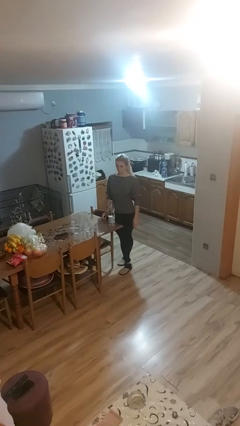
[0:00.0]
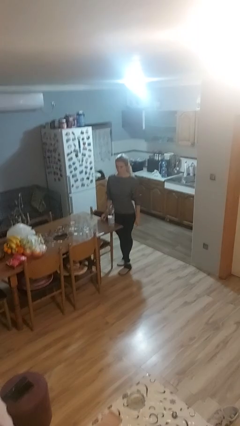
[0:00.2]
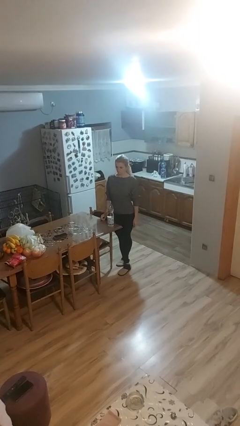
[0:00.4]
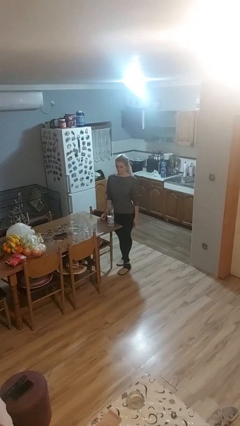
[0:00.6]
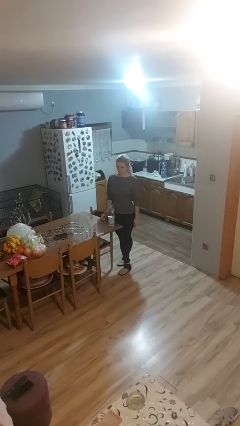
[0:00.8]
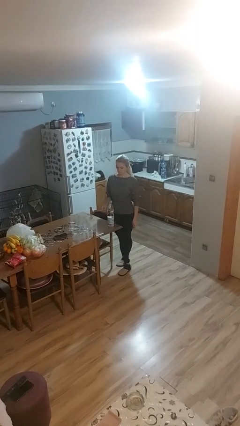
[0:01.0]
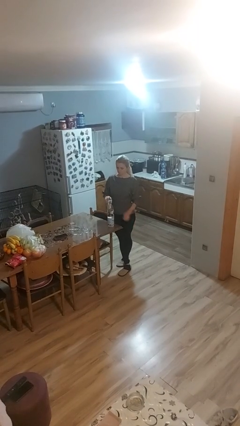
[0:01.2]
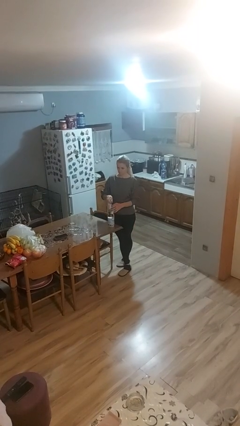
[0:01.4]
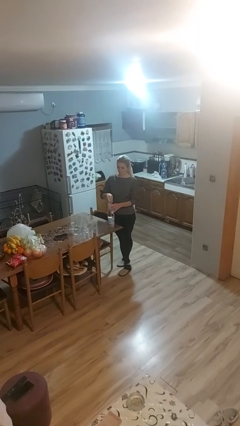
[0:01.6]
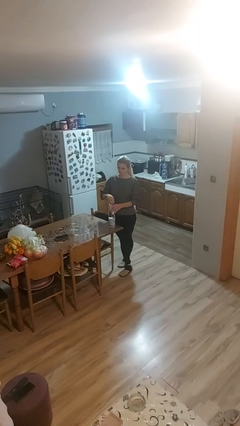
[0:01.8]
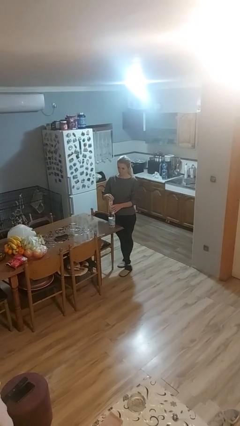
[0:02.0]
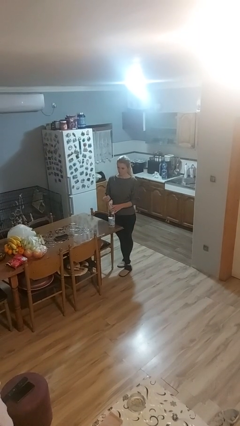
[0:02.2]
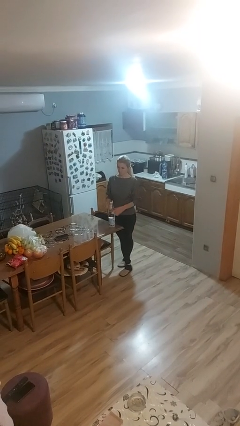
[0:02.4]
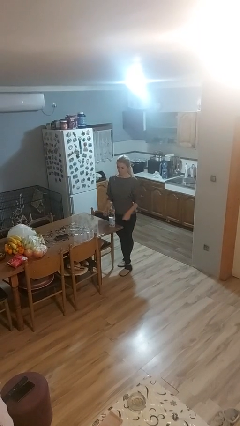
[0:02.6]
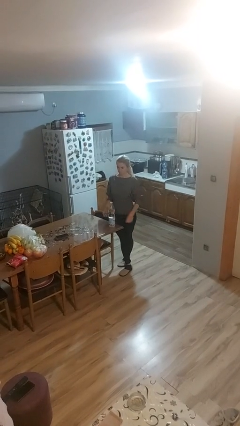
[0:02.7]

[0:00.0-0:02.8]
person unscrews lid from bottle

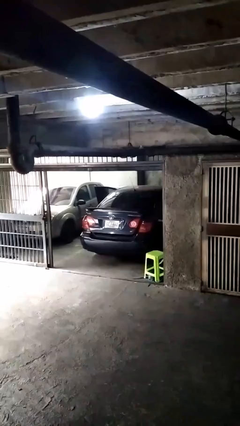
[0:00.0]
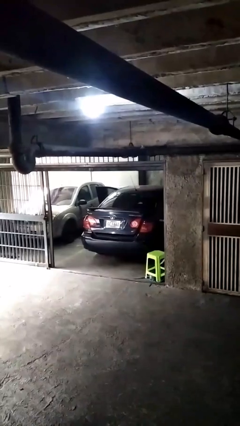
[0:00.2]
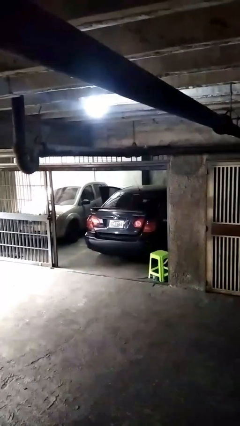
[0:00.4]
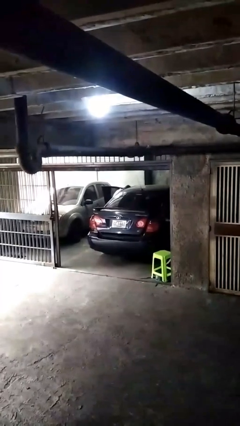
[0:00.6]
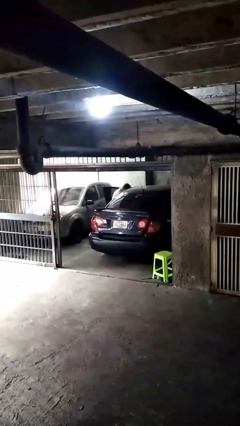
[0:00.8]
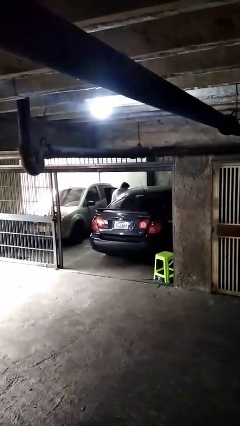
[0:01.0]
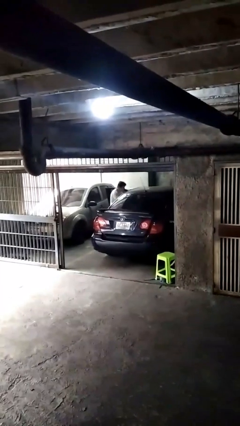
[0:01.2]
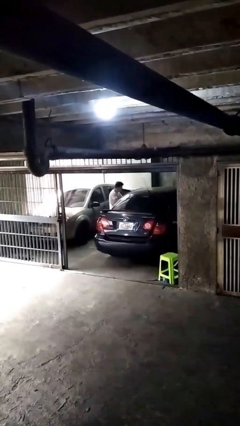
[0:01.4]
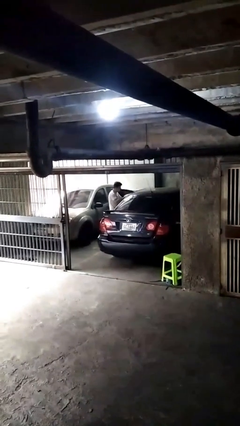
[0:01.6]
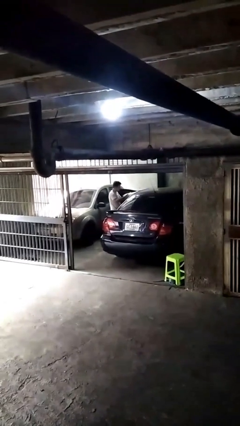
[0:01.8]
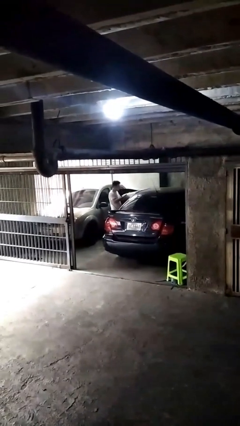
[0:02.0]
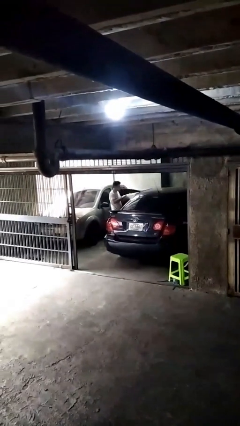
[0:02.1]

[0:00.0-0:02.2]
person unloads car

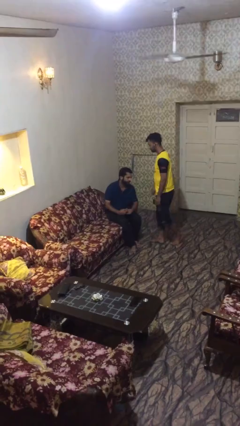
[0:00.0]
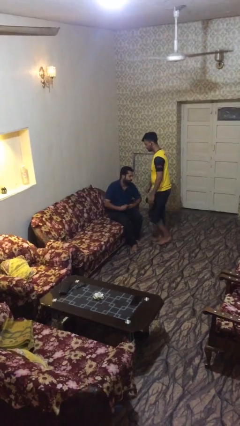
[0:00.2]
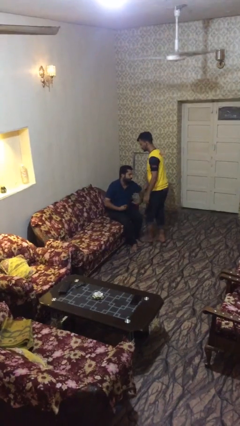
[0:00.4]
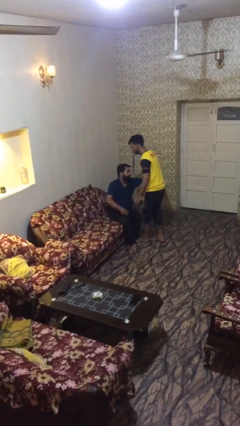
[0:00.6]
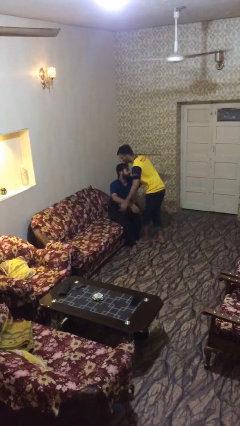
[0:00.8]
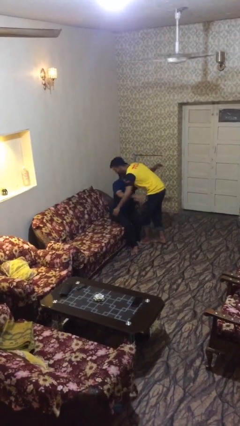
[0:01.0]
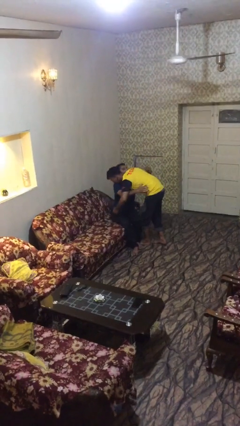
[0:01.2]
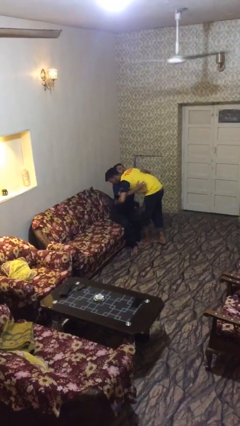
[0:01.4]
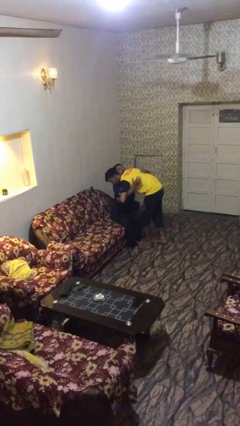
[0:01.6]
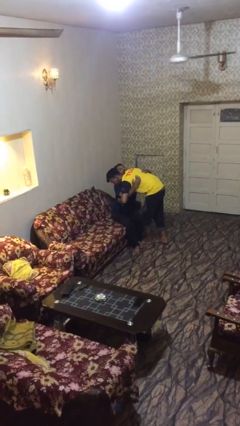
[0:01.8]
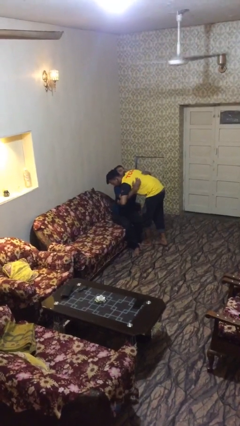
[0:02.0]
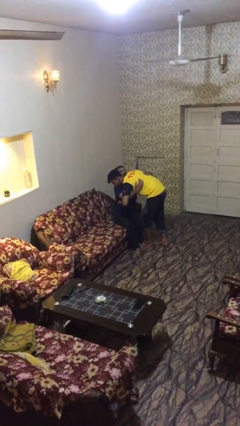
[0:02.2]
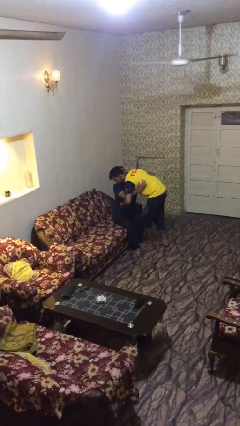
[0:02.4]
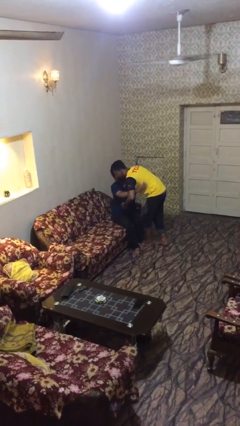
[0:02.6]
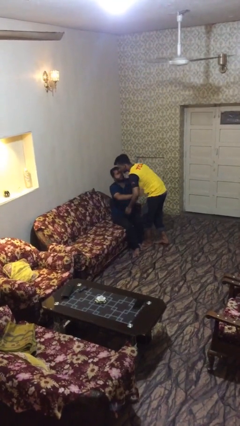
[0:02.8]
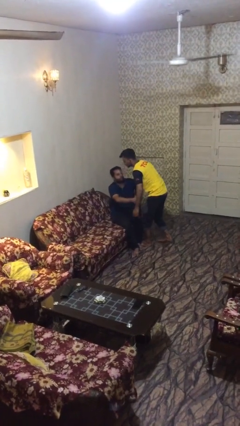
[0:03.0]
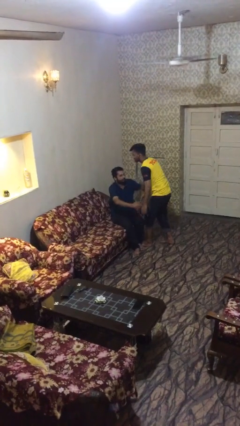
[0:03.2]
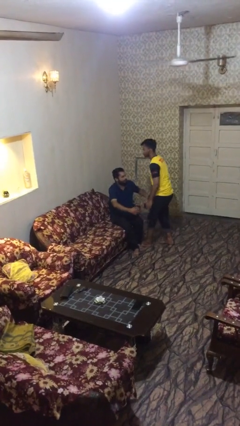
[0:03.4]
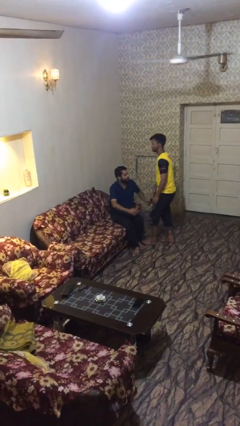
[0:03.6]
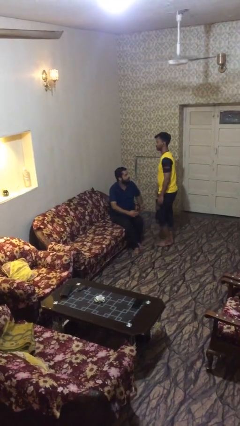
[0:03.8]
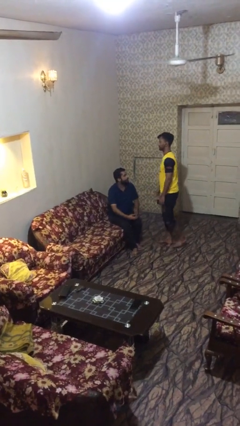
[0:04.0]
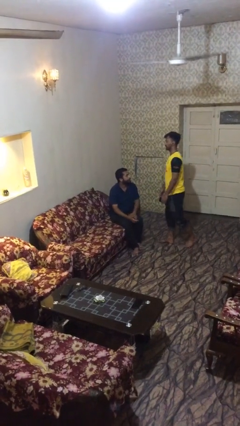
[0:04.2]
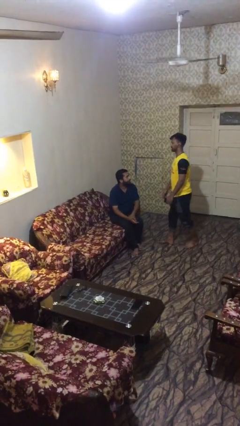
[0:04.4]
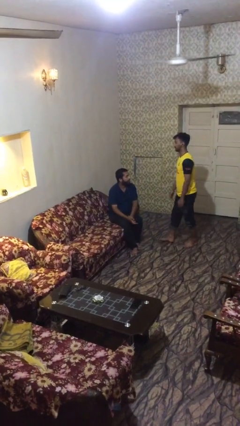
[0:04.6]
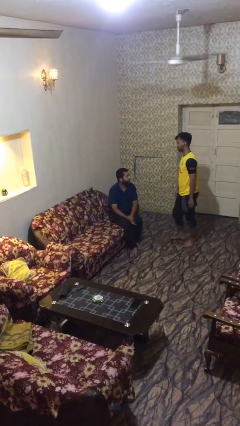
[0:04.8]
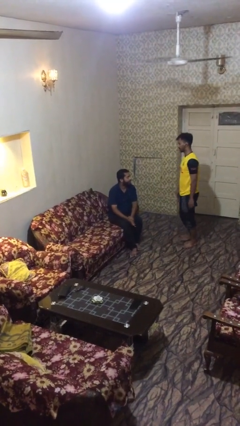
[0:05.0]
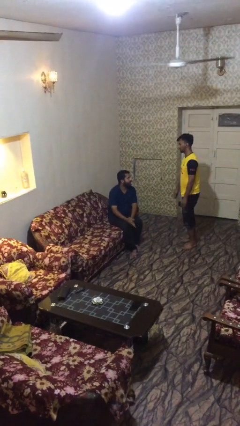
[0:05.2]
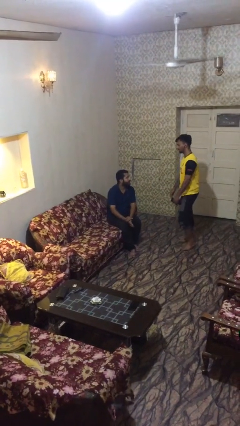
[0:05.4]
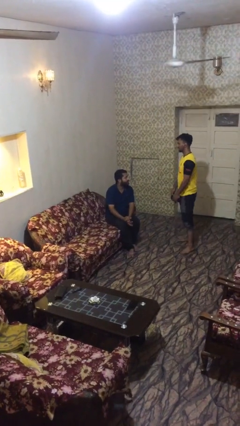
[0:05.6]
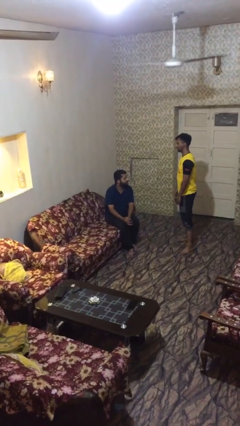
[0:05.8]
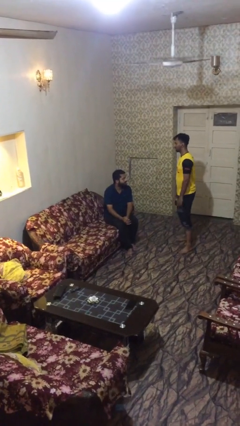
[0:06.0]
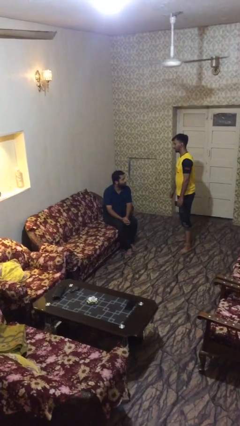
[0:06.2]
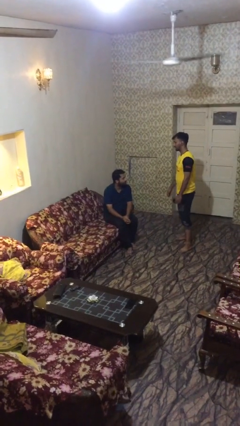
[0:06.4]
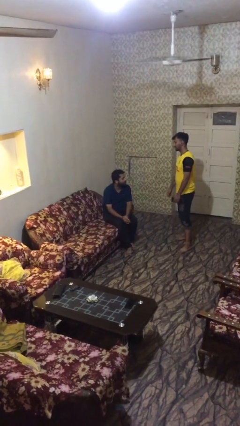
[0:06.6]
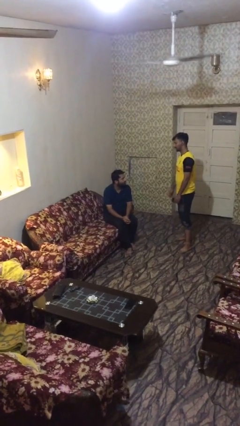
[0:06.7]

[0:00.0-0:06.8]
person embraces person

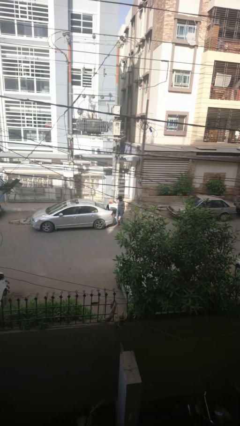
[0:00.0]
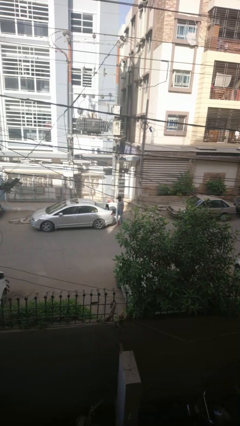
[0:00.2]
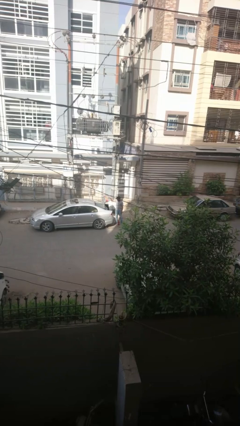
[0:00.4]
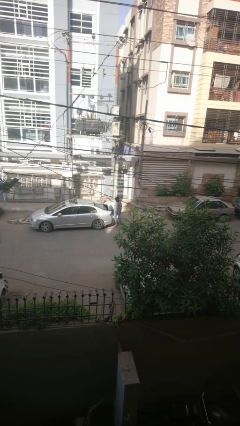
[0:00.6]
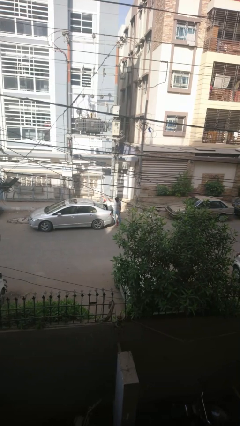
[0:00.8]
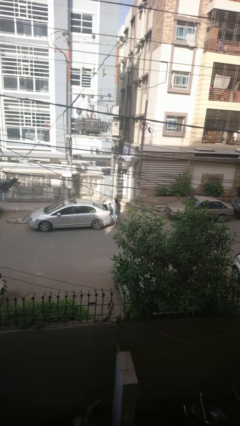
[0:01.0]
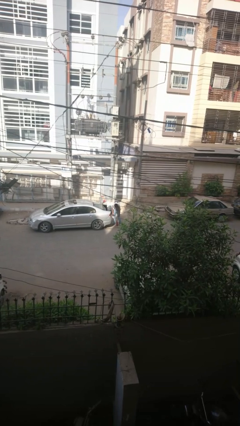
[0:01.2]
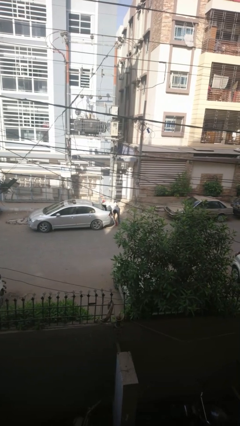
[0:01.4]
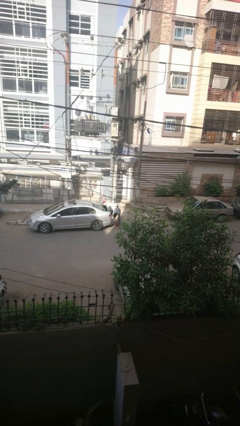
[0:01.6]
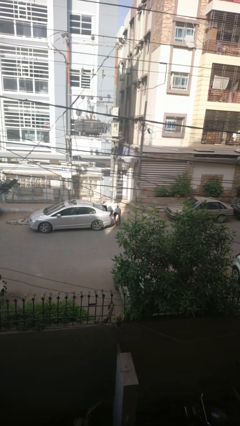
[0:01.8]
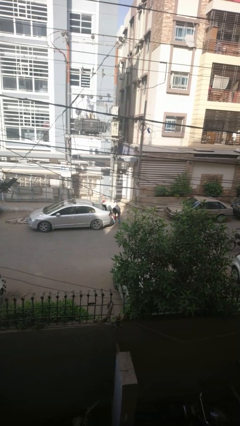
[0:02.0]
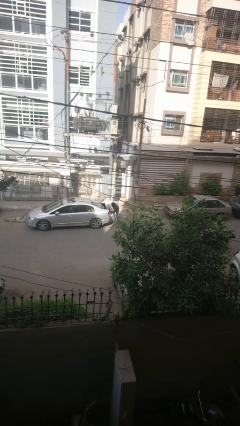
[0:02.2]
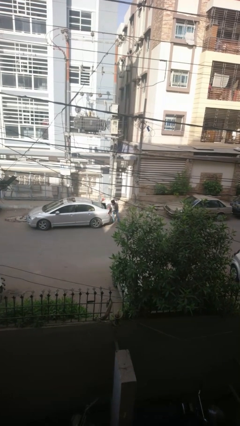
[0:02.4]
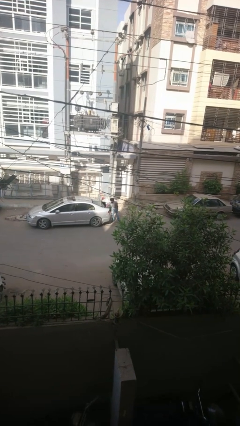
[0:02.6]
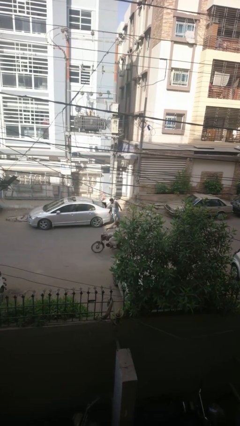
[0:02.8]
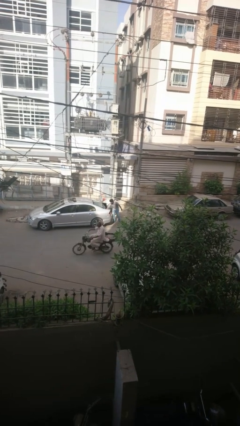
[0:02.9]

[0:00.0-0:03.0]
person loads car

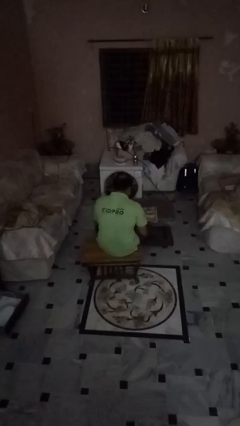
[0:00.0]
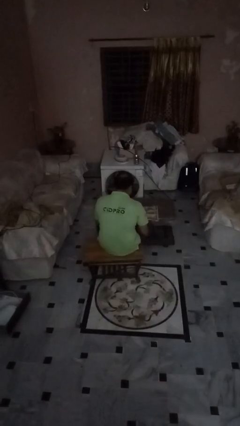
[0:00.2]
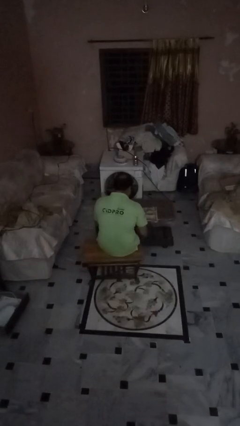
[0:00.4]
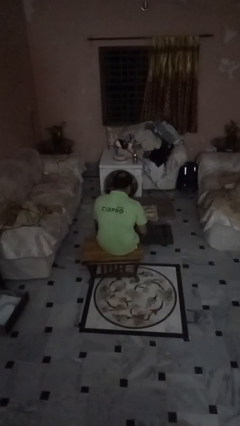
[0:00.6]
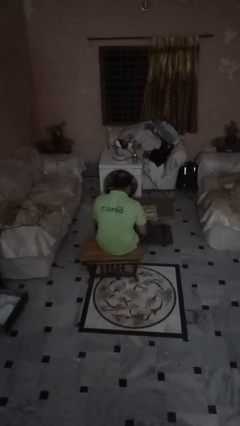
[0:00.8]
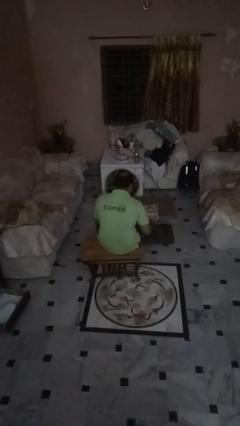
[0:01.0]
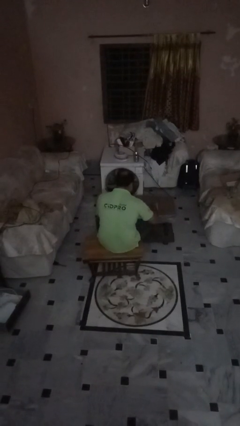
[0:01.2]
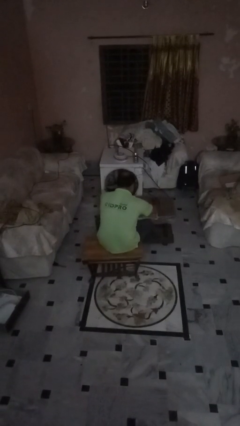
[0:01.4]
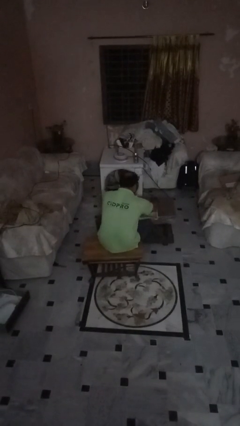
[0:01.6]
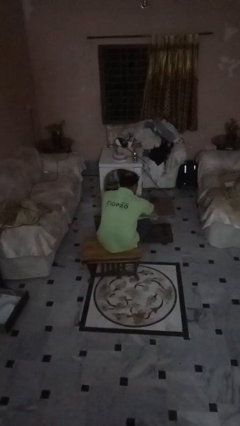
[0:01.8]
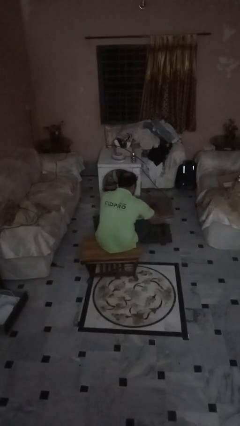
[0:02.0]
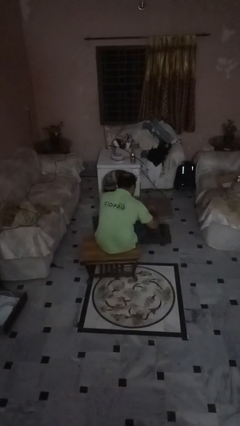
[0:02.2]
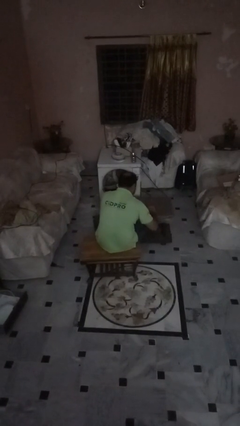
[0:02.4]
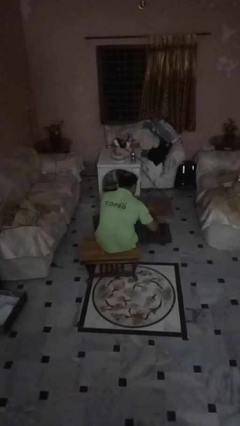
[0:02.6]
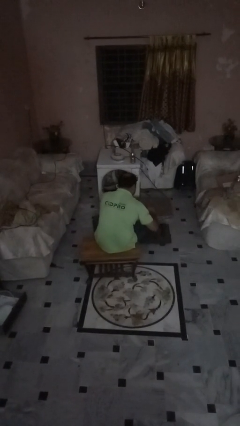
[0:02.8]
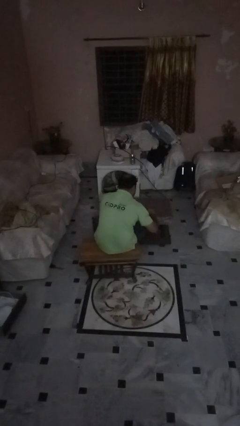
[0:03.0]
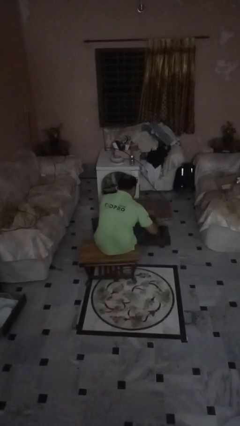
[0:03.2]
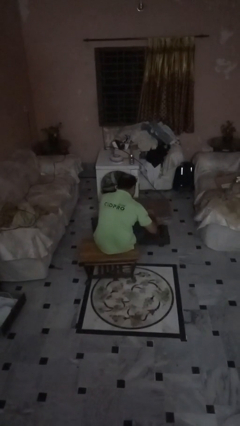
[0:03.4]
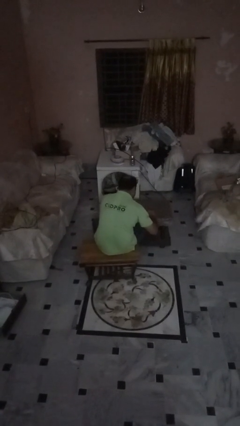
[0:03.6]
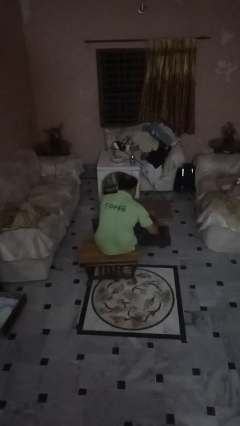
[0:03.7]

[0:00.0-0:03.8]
person tears paper
